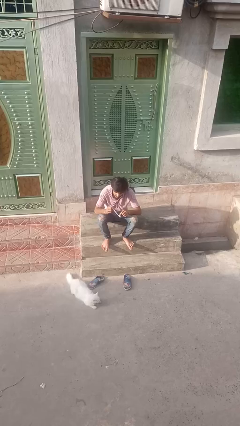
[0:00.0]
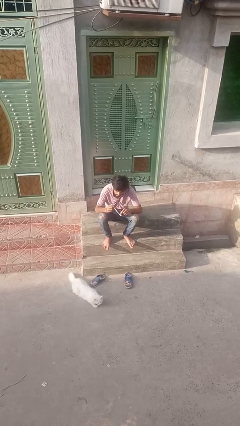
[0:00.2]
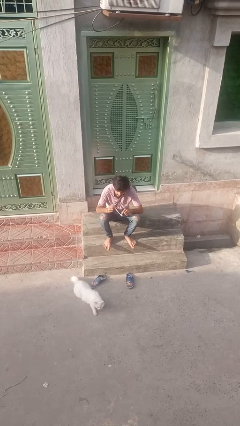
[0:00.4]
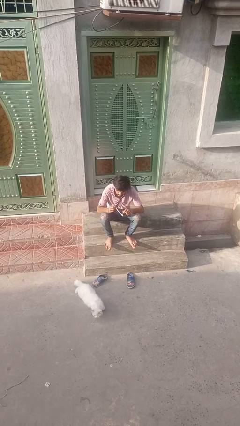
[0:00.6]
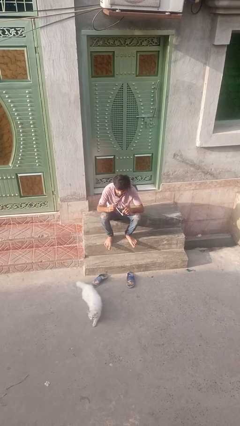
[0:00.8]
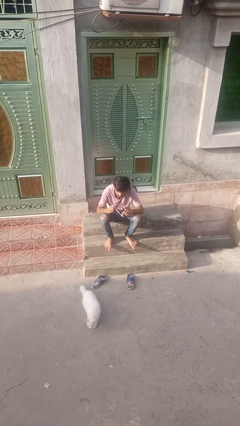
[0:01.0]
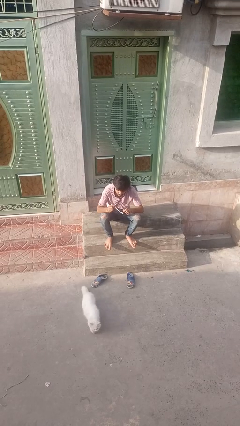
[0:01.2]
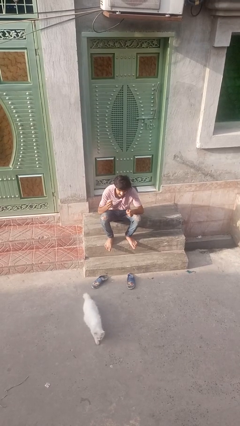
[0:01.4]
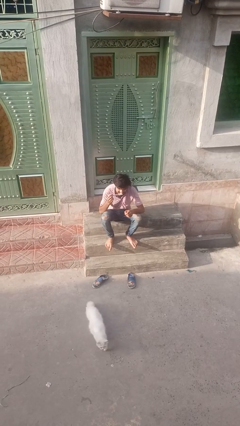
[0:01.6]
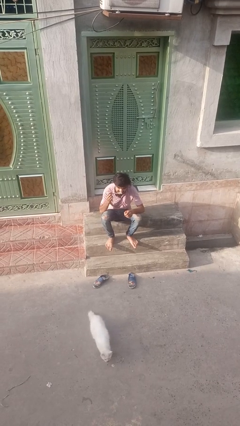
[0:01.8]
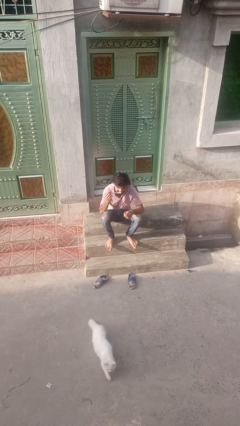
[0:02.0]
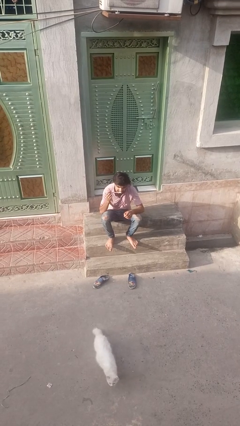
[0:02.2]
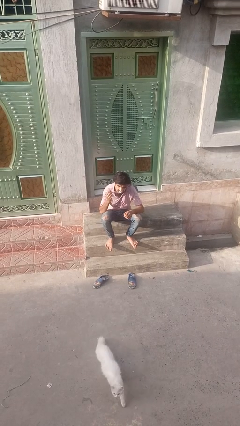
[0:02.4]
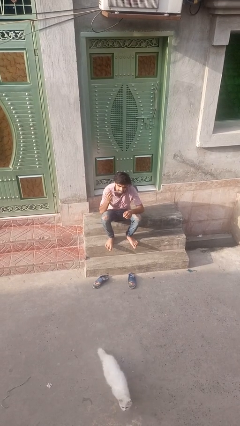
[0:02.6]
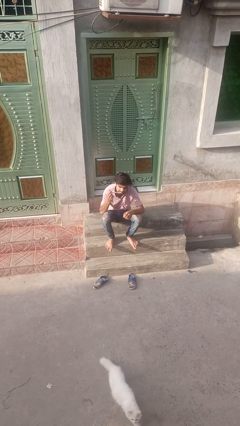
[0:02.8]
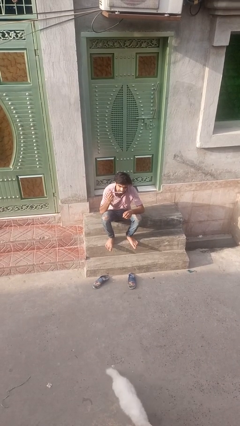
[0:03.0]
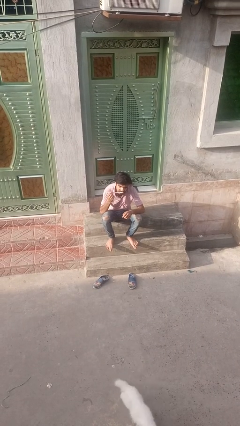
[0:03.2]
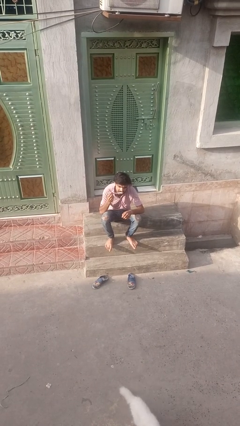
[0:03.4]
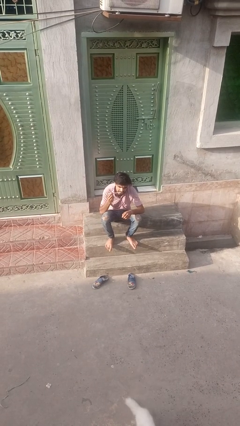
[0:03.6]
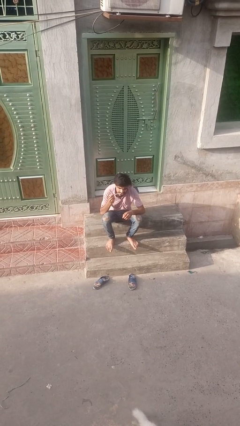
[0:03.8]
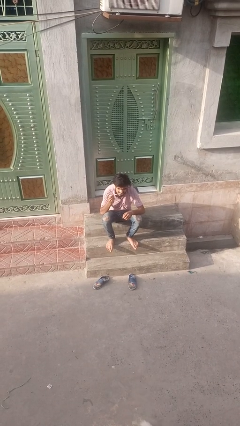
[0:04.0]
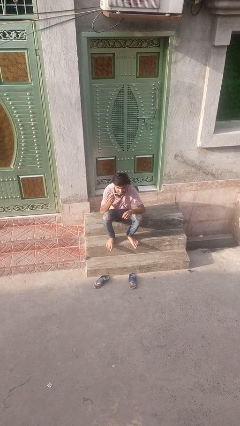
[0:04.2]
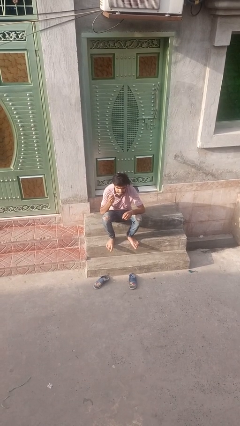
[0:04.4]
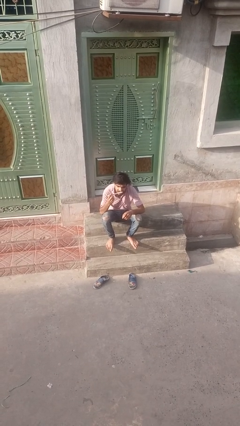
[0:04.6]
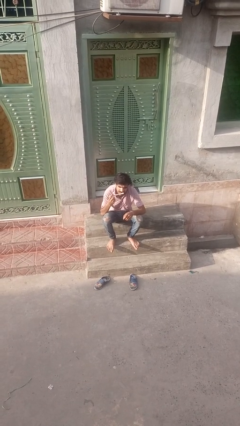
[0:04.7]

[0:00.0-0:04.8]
person brushes hair

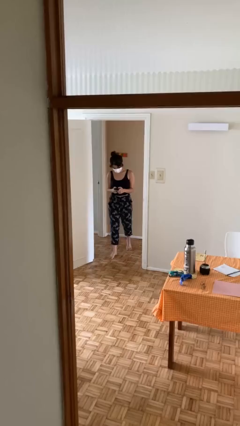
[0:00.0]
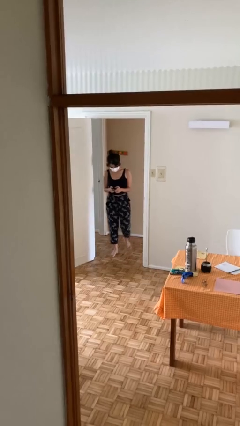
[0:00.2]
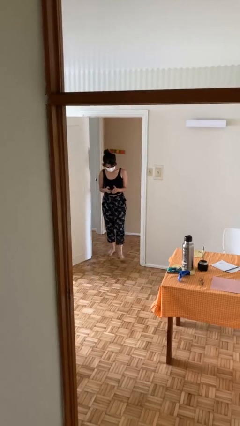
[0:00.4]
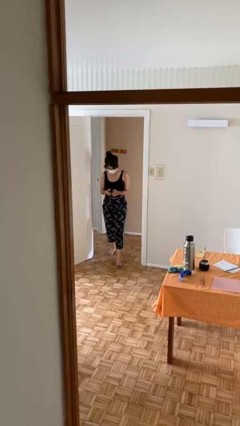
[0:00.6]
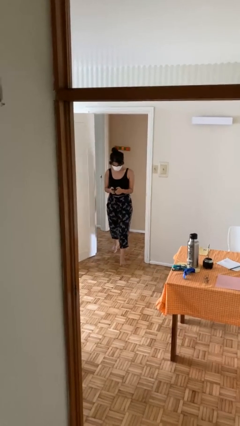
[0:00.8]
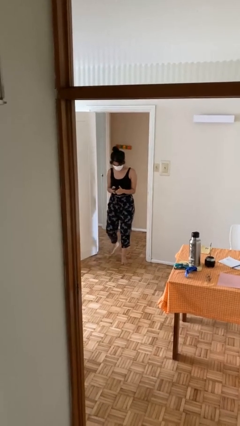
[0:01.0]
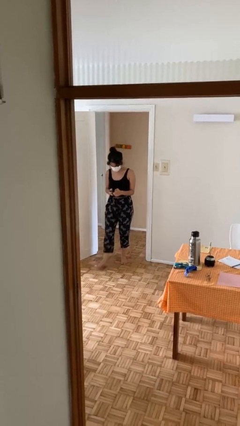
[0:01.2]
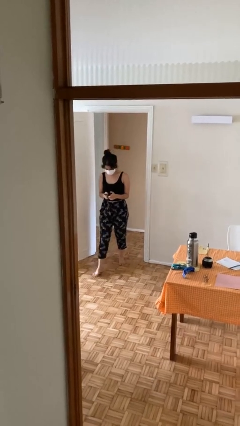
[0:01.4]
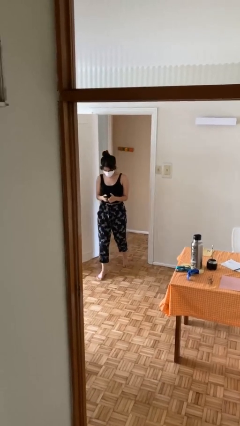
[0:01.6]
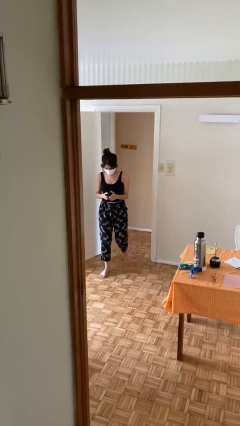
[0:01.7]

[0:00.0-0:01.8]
person enters scene through structure

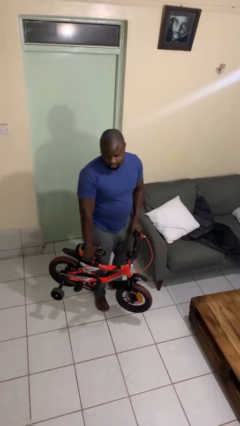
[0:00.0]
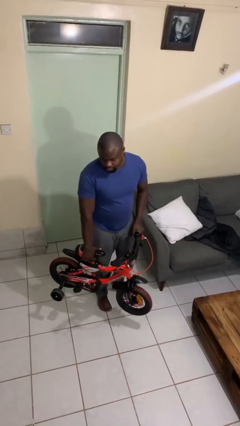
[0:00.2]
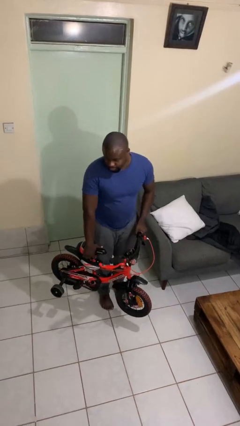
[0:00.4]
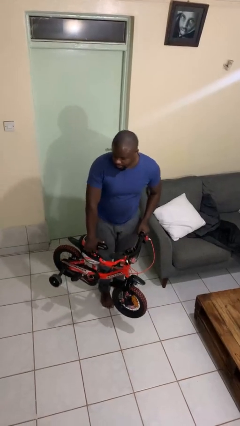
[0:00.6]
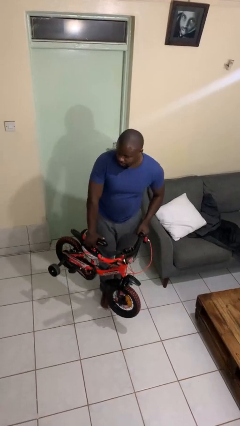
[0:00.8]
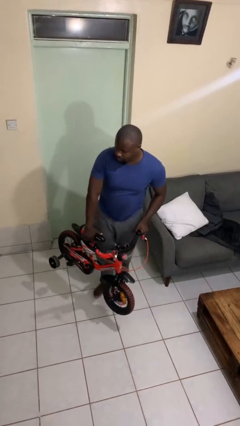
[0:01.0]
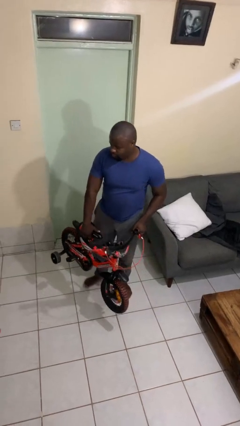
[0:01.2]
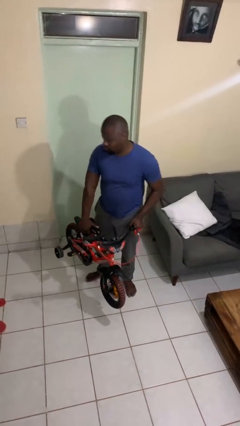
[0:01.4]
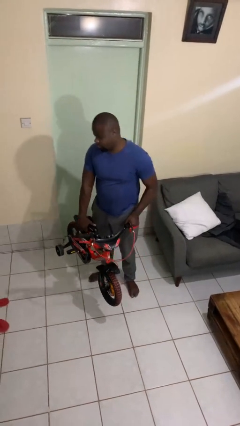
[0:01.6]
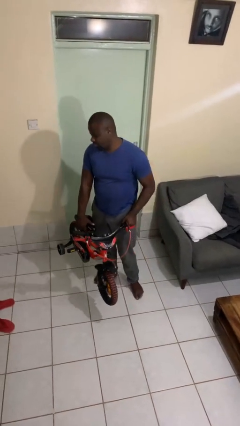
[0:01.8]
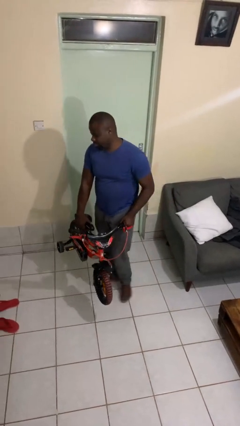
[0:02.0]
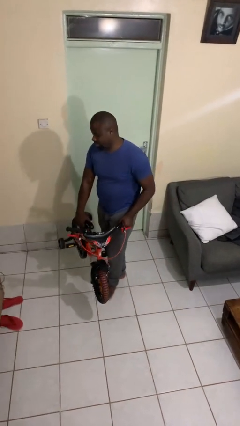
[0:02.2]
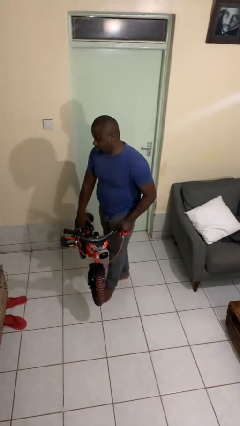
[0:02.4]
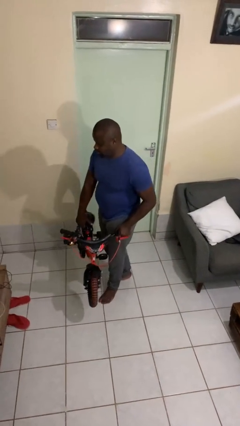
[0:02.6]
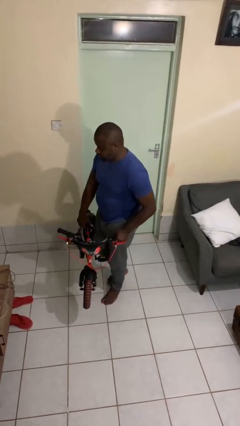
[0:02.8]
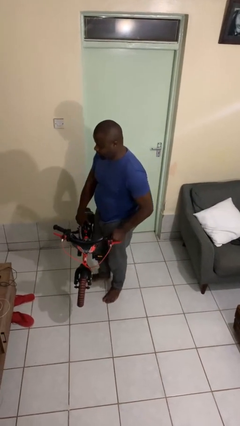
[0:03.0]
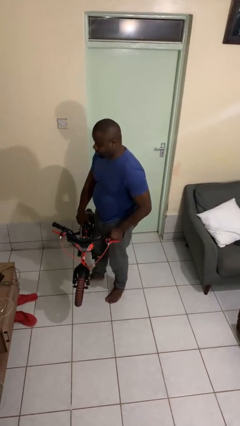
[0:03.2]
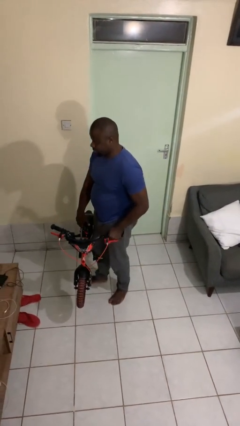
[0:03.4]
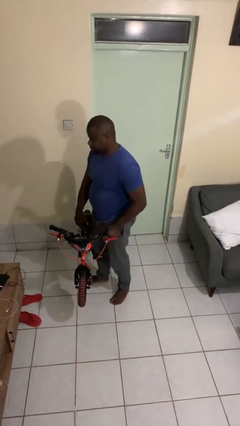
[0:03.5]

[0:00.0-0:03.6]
person carries bicycle

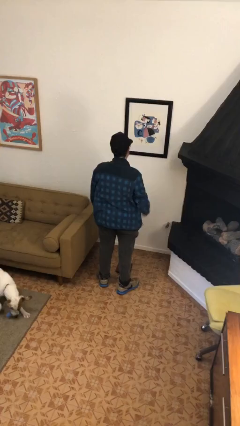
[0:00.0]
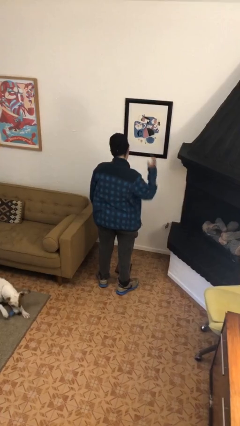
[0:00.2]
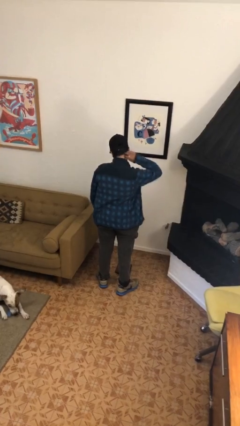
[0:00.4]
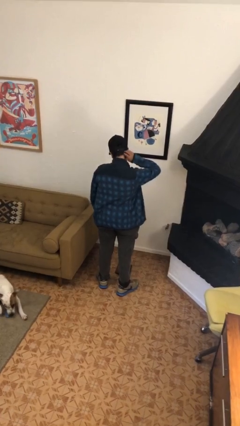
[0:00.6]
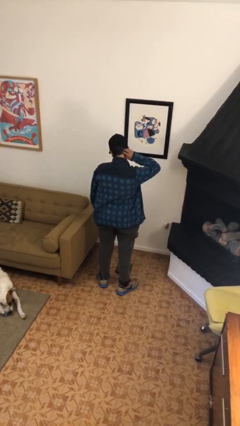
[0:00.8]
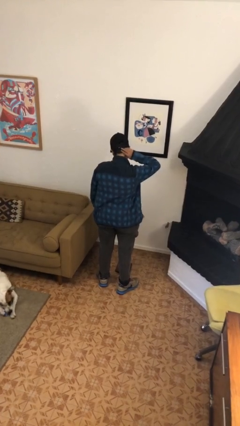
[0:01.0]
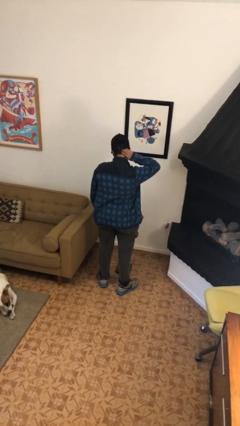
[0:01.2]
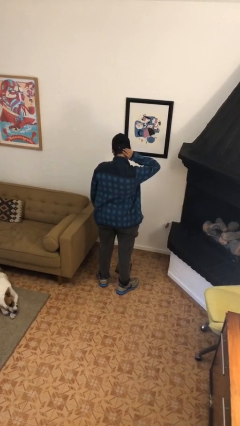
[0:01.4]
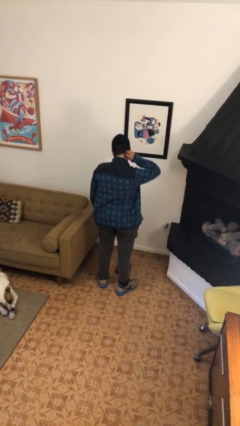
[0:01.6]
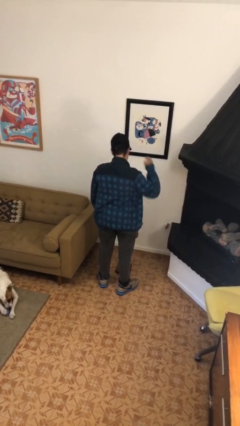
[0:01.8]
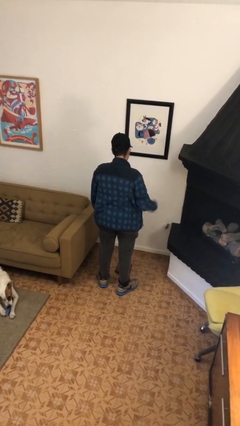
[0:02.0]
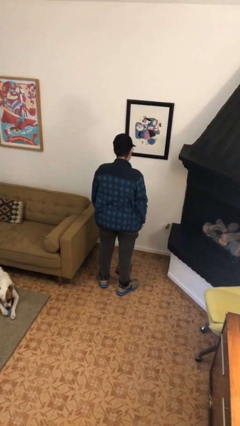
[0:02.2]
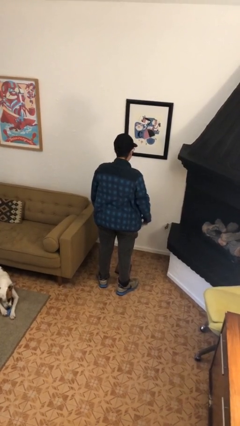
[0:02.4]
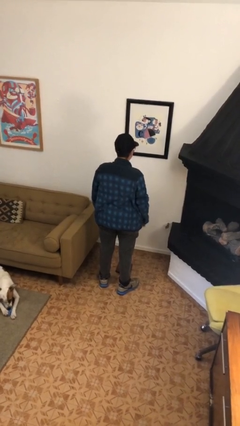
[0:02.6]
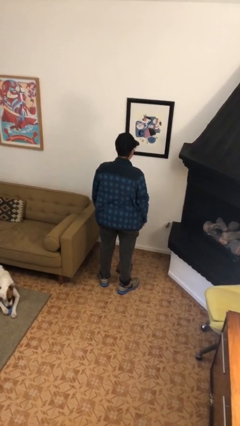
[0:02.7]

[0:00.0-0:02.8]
person scratches face

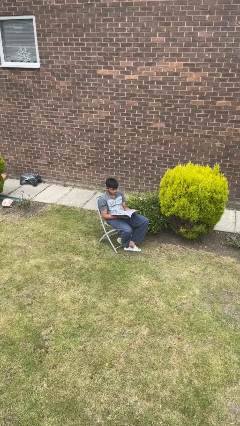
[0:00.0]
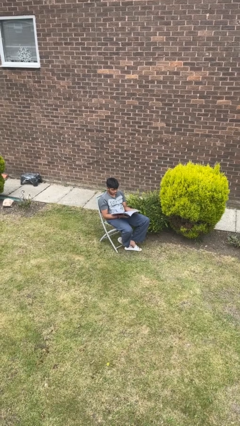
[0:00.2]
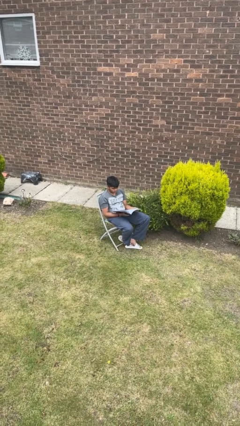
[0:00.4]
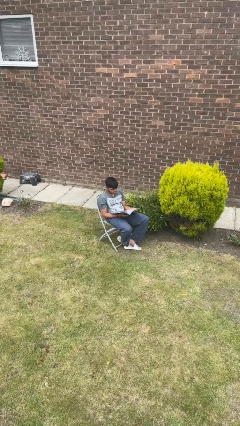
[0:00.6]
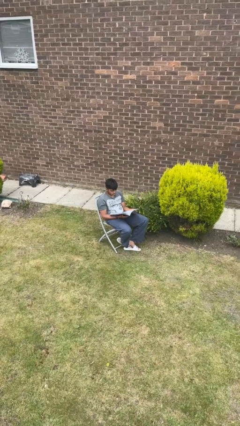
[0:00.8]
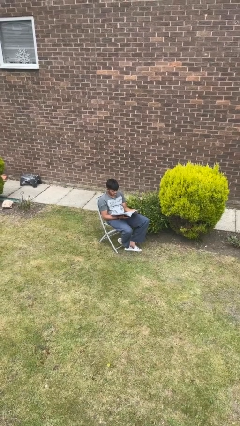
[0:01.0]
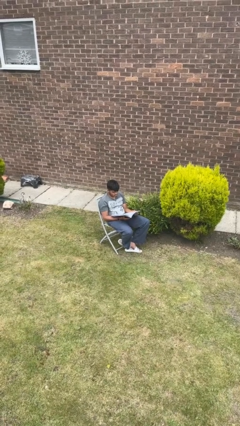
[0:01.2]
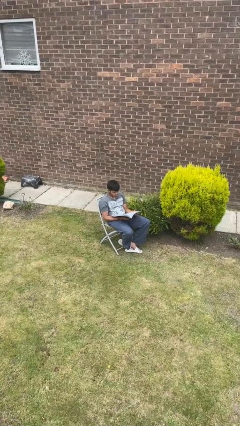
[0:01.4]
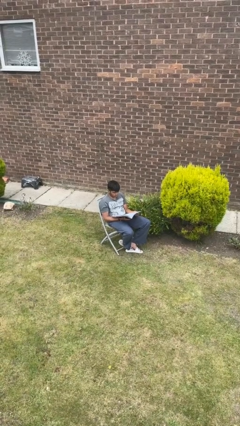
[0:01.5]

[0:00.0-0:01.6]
person reads magazine

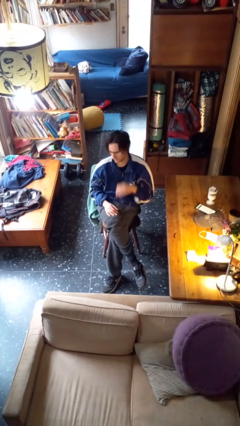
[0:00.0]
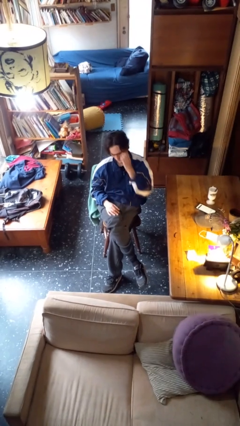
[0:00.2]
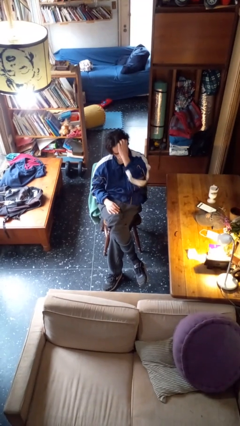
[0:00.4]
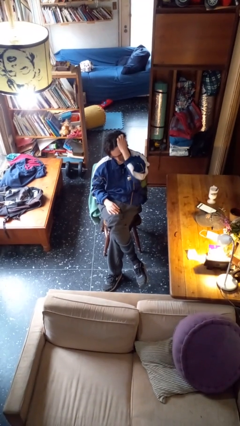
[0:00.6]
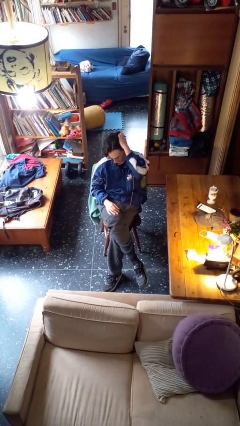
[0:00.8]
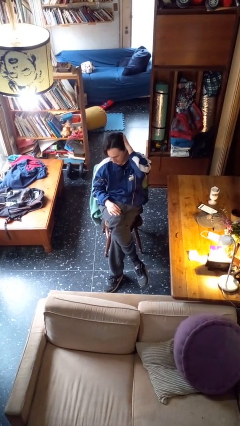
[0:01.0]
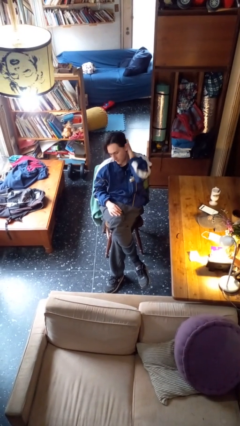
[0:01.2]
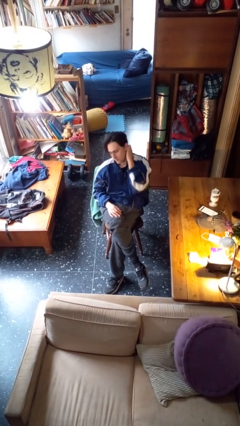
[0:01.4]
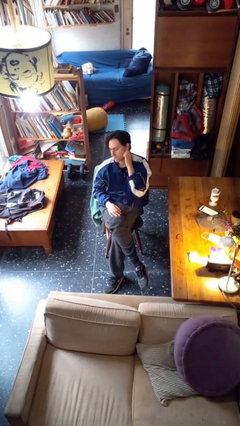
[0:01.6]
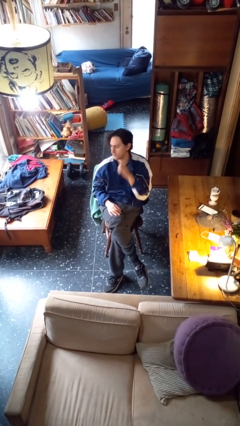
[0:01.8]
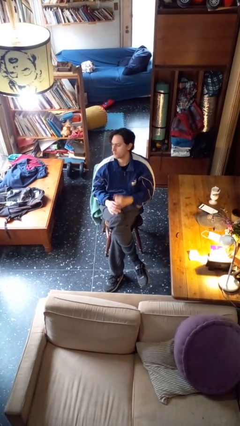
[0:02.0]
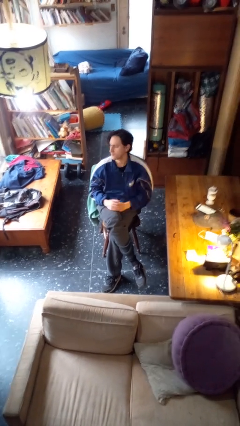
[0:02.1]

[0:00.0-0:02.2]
person strokes hair

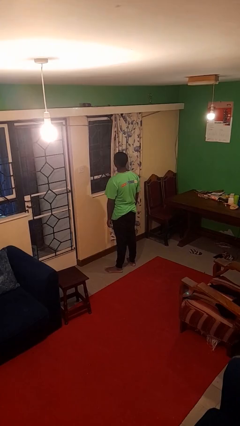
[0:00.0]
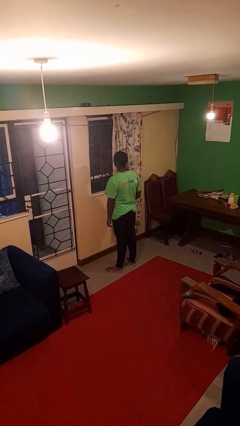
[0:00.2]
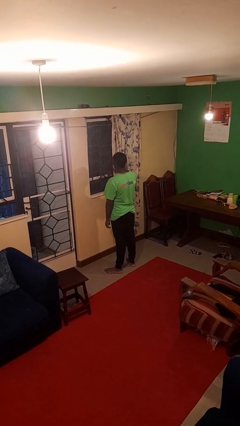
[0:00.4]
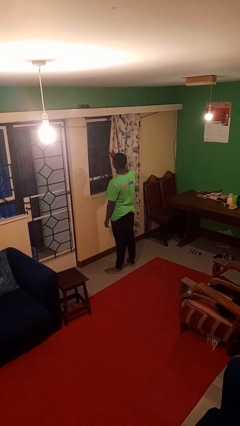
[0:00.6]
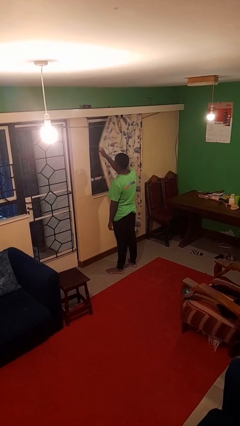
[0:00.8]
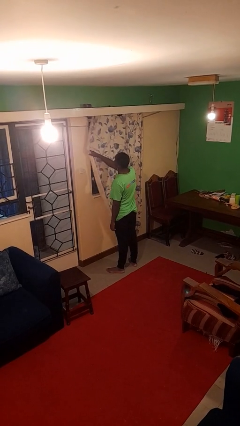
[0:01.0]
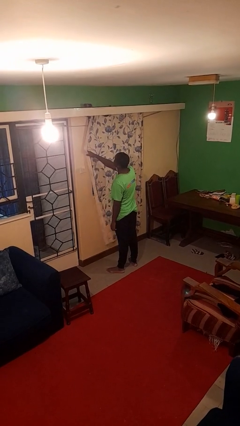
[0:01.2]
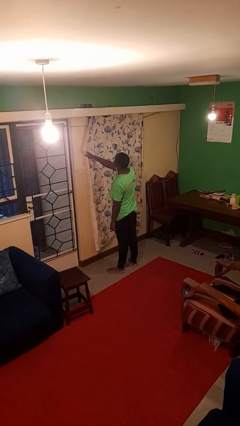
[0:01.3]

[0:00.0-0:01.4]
person closes curtains
